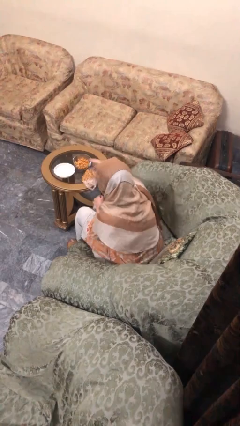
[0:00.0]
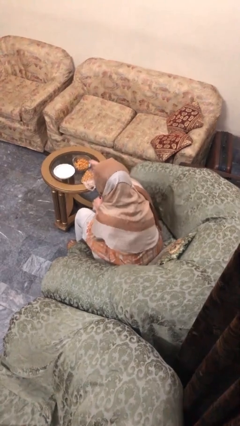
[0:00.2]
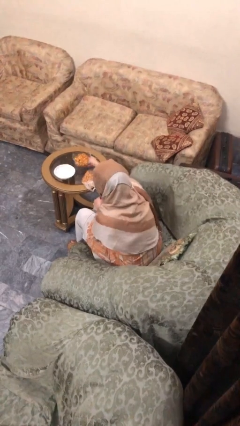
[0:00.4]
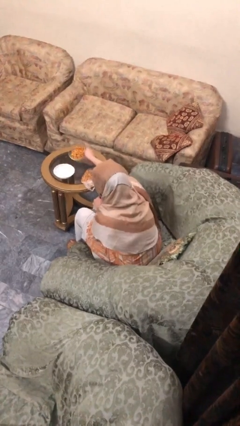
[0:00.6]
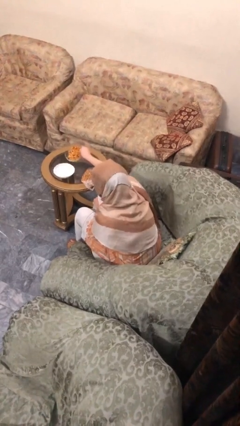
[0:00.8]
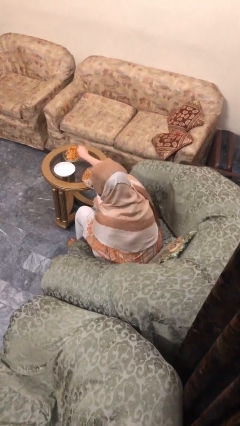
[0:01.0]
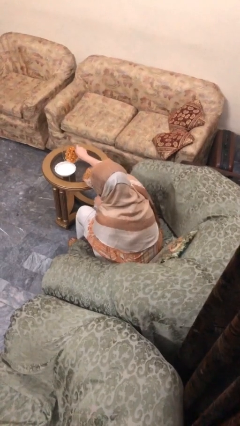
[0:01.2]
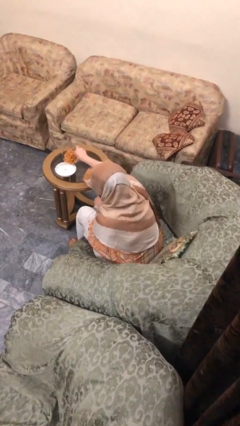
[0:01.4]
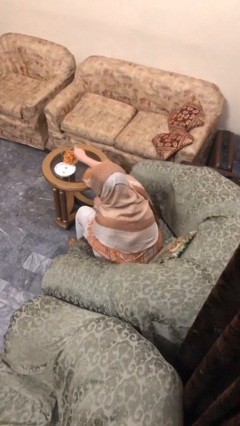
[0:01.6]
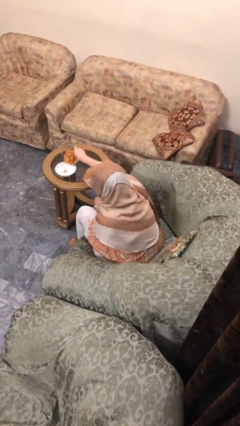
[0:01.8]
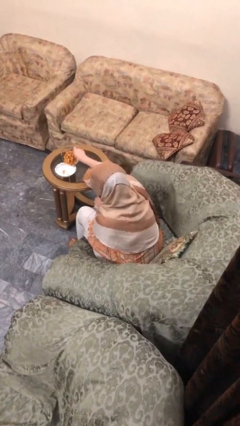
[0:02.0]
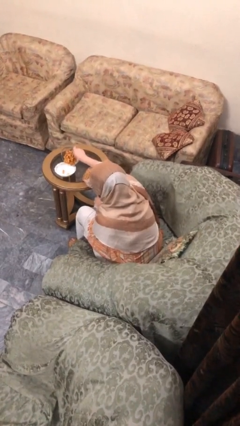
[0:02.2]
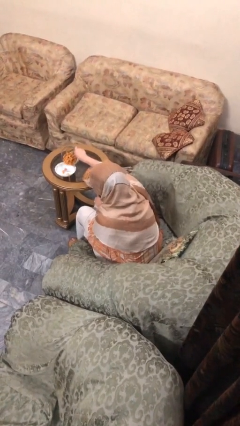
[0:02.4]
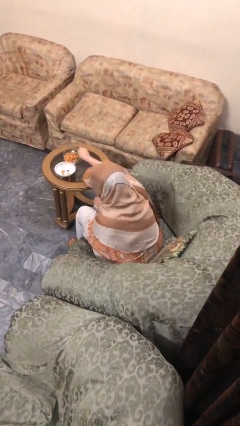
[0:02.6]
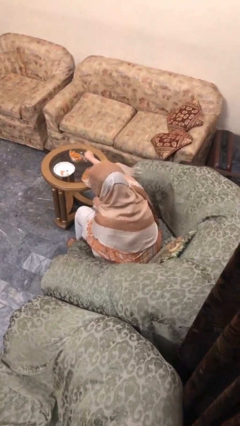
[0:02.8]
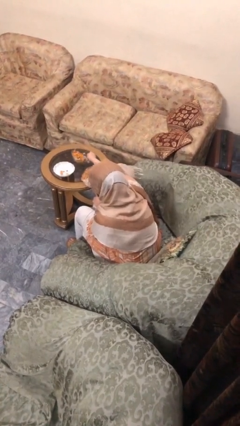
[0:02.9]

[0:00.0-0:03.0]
person pours into bowl

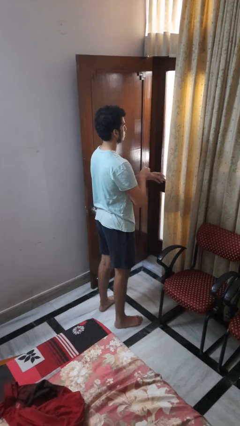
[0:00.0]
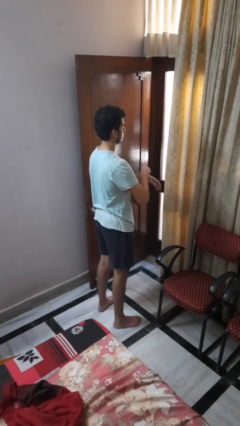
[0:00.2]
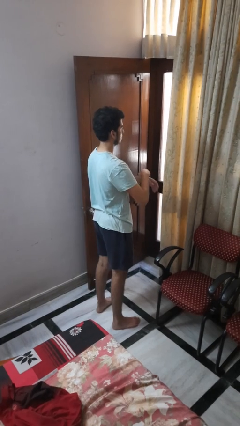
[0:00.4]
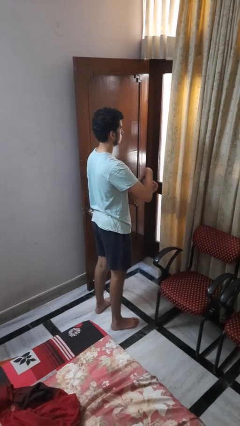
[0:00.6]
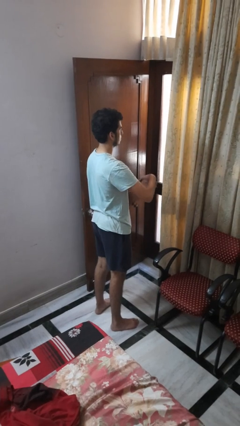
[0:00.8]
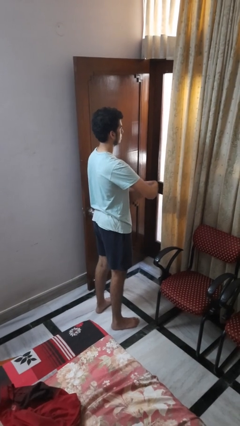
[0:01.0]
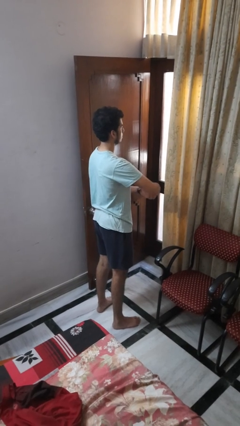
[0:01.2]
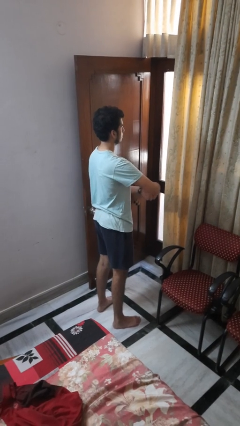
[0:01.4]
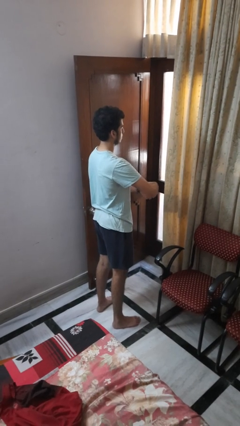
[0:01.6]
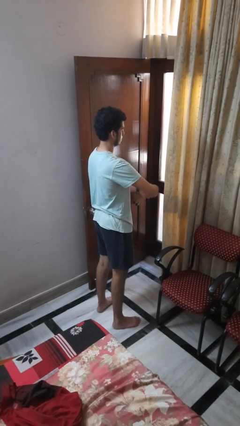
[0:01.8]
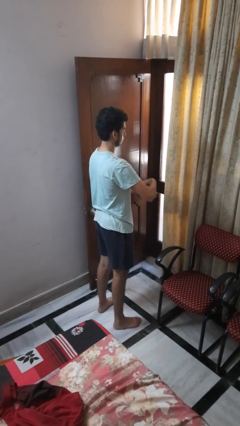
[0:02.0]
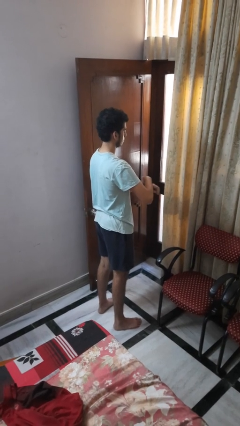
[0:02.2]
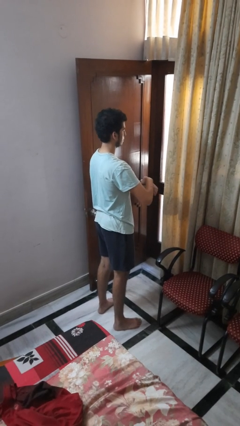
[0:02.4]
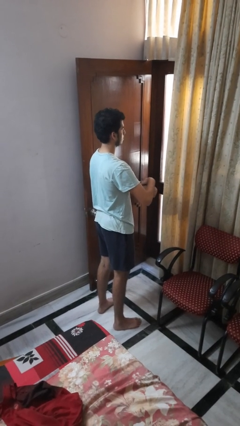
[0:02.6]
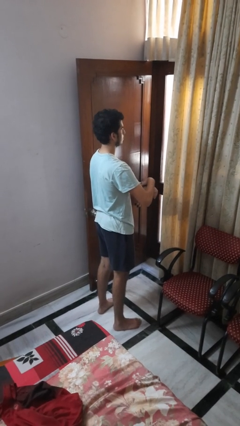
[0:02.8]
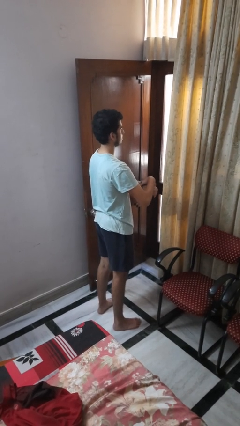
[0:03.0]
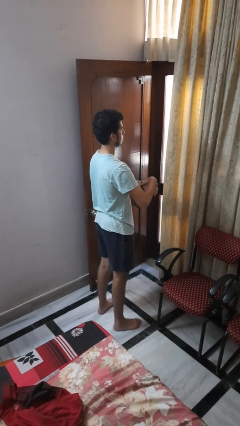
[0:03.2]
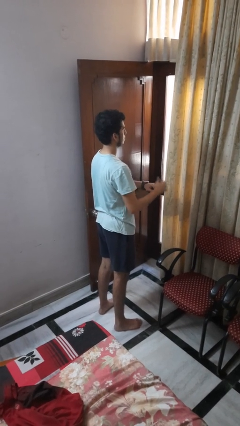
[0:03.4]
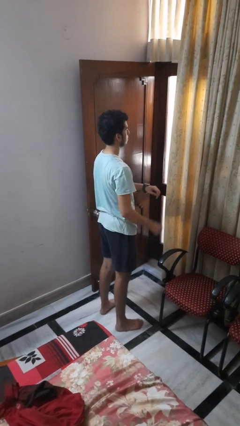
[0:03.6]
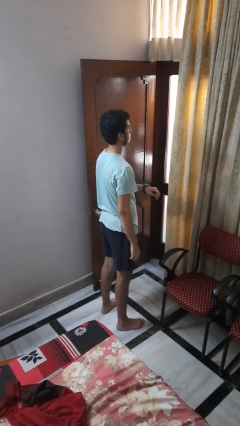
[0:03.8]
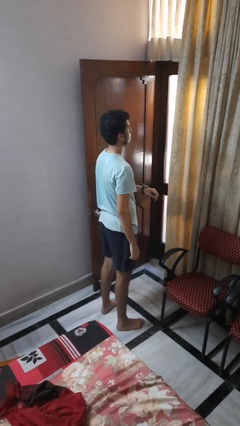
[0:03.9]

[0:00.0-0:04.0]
person puts on wristwatch

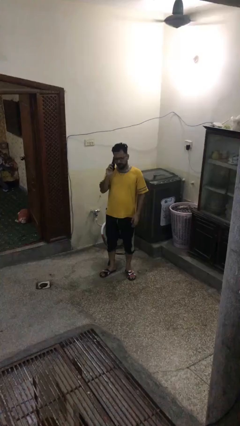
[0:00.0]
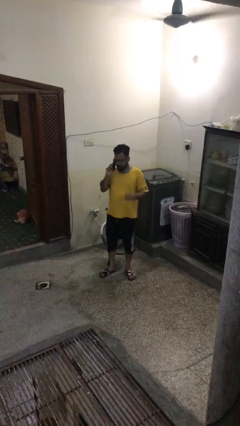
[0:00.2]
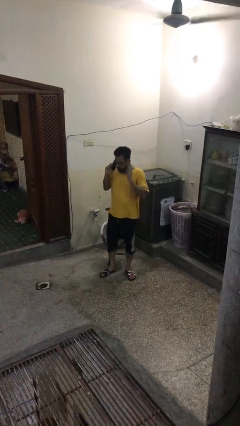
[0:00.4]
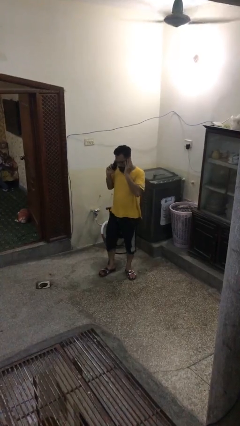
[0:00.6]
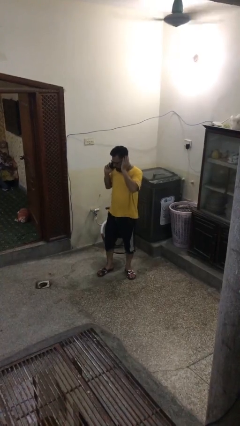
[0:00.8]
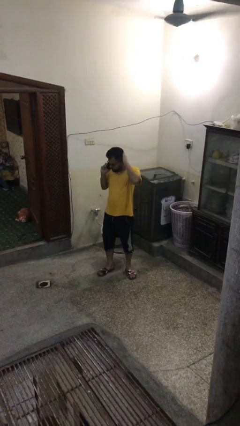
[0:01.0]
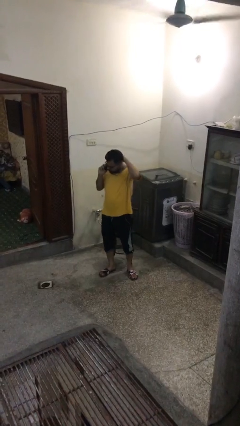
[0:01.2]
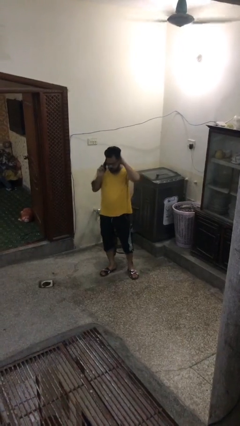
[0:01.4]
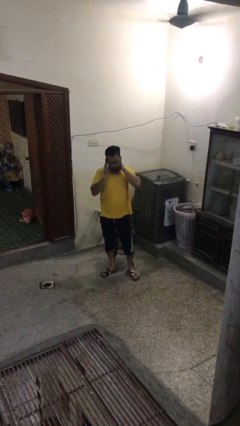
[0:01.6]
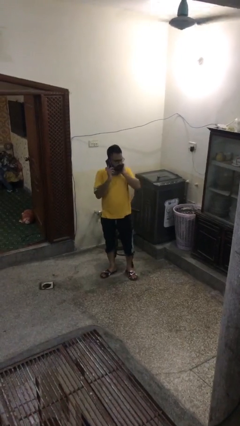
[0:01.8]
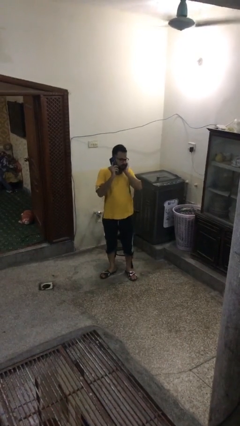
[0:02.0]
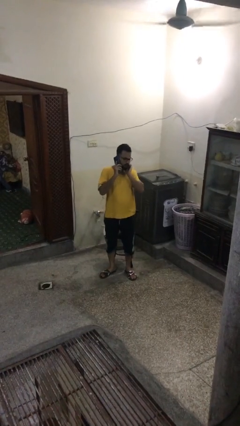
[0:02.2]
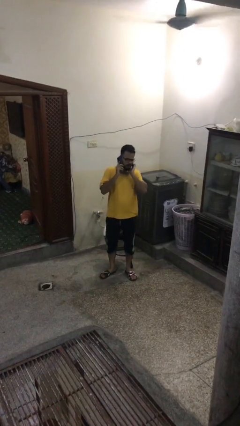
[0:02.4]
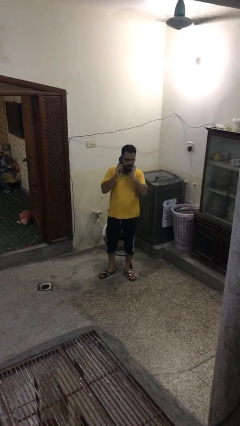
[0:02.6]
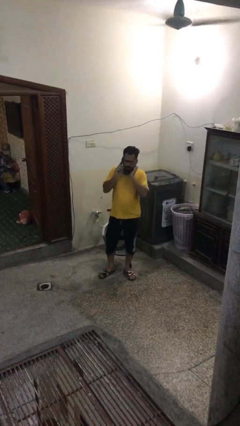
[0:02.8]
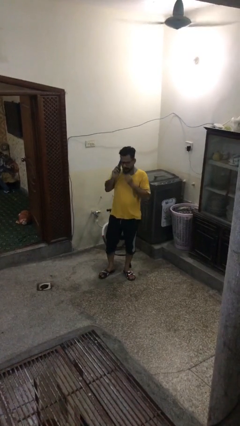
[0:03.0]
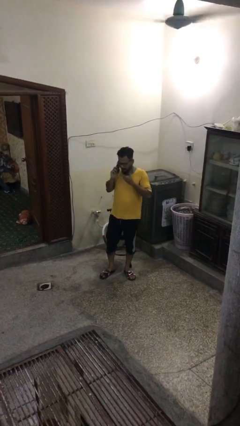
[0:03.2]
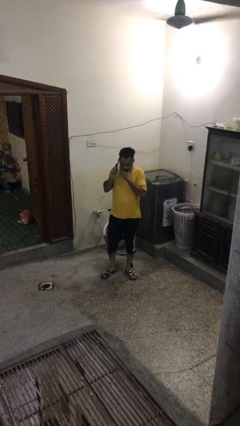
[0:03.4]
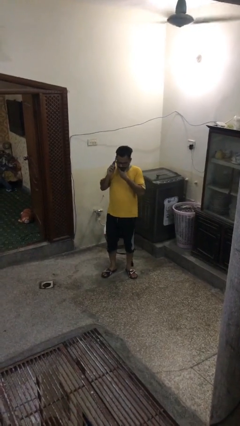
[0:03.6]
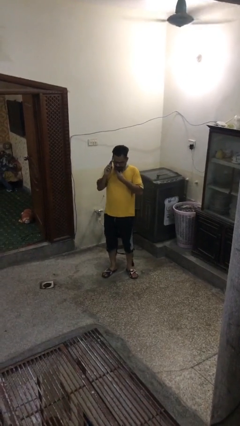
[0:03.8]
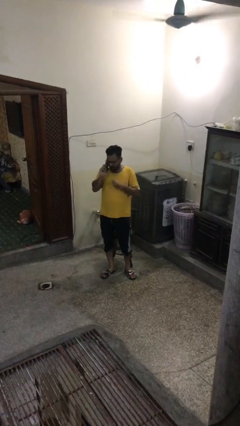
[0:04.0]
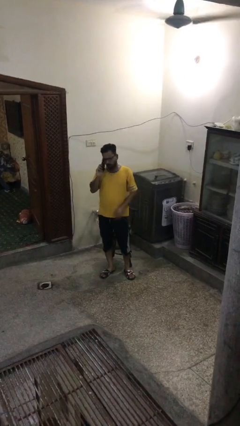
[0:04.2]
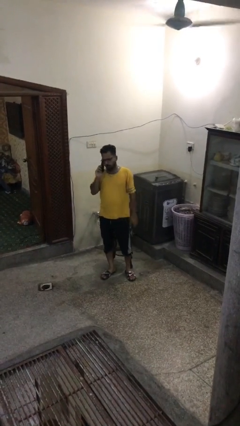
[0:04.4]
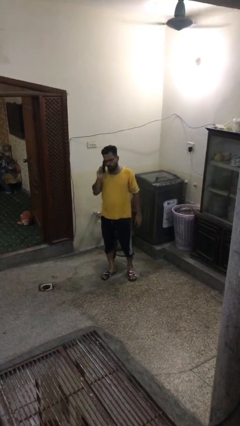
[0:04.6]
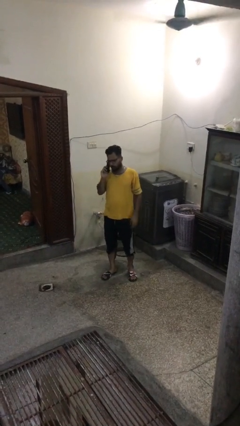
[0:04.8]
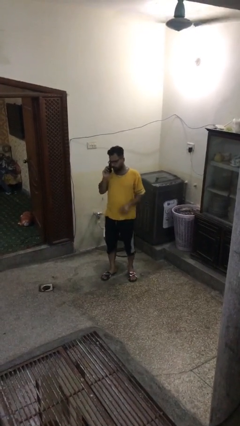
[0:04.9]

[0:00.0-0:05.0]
person talks on phone

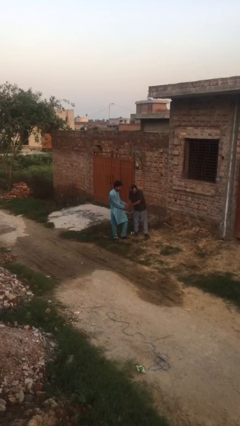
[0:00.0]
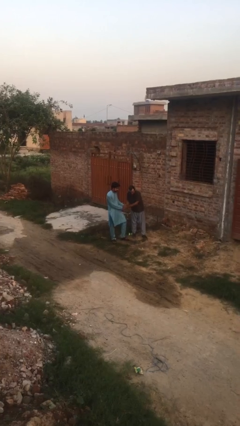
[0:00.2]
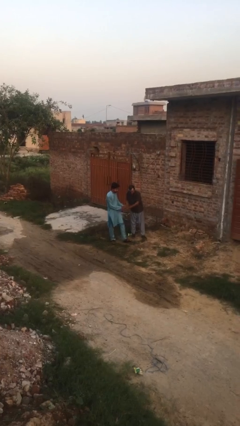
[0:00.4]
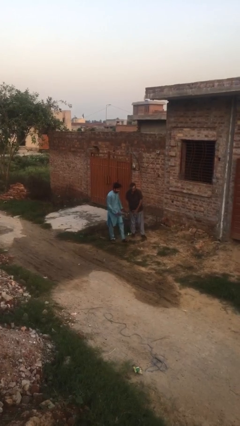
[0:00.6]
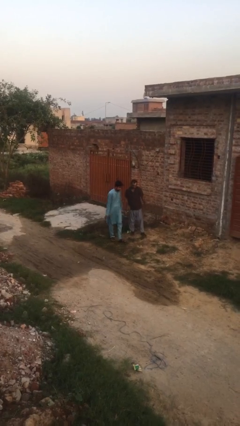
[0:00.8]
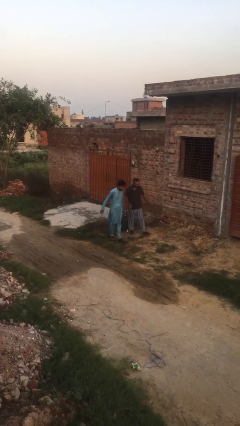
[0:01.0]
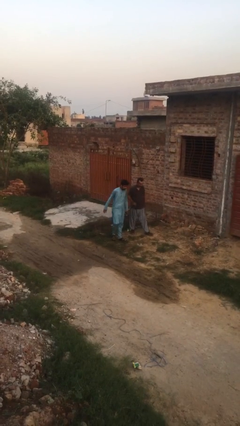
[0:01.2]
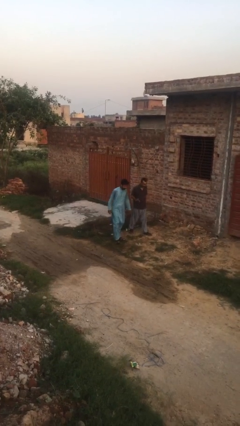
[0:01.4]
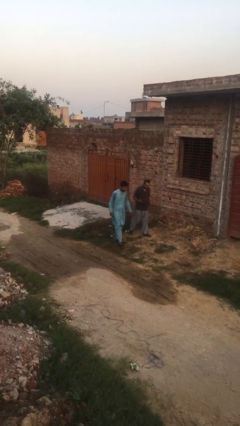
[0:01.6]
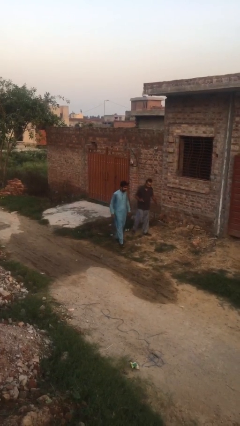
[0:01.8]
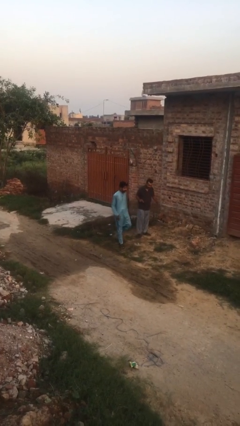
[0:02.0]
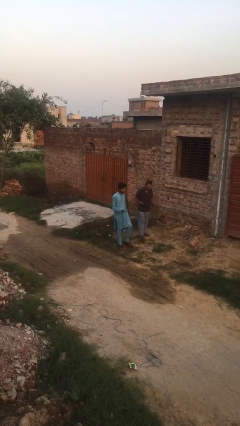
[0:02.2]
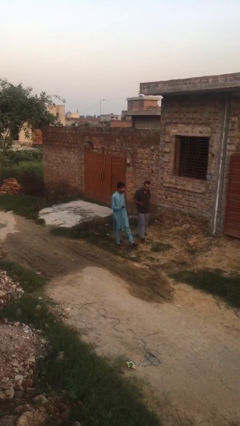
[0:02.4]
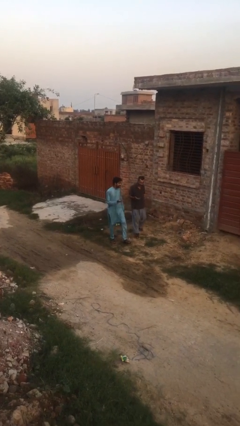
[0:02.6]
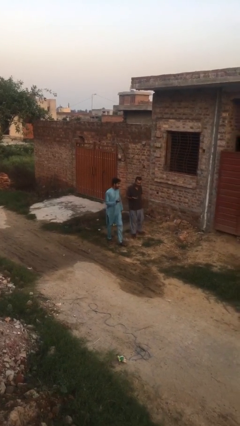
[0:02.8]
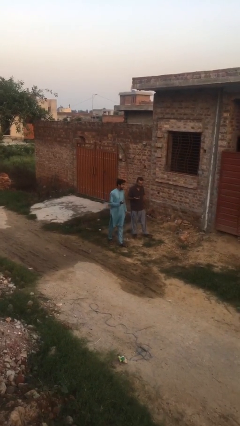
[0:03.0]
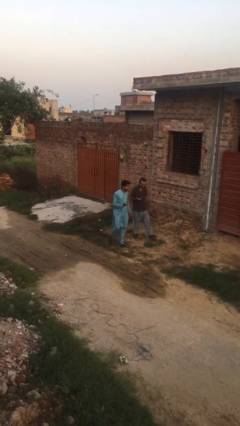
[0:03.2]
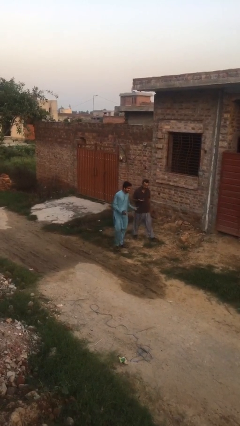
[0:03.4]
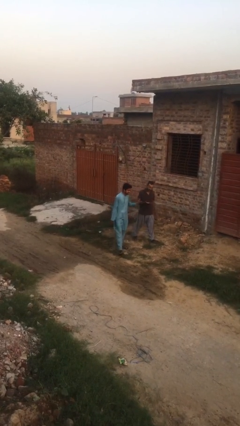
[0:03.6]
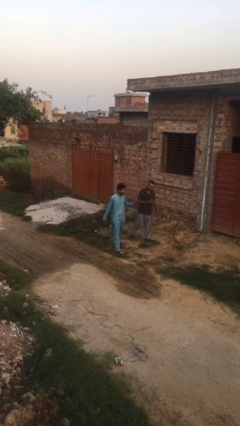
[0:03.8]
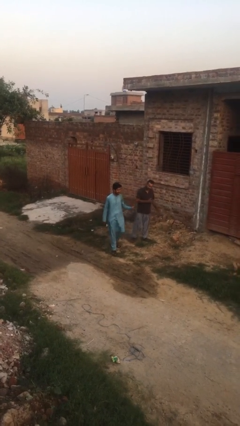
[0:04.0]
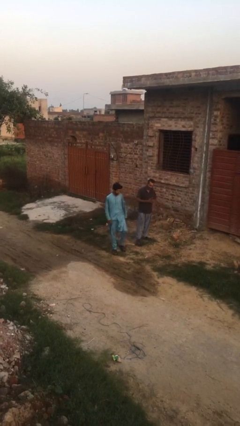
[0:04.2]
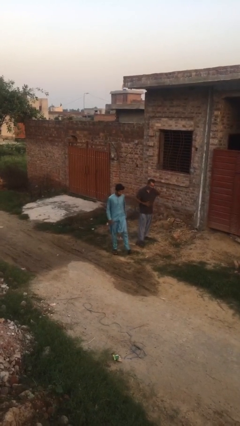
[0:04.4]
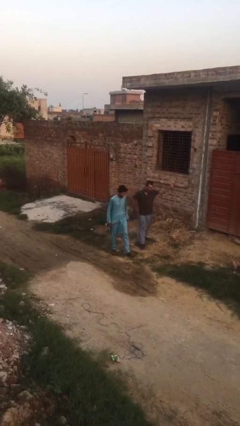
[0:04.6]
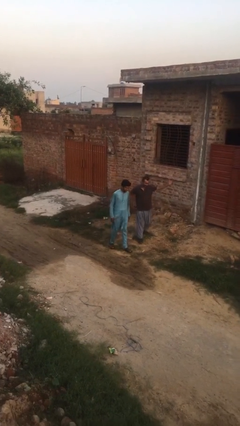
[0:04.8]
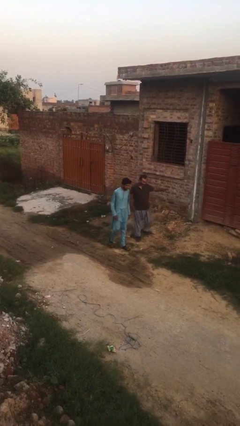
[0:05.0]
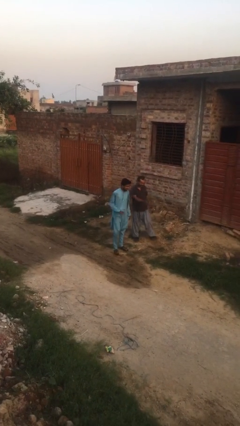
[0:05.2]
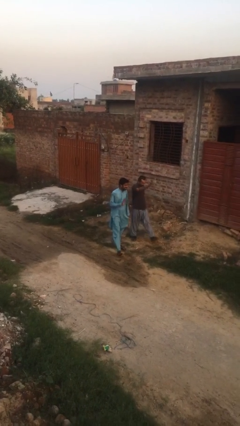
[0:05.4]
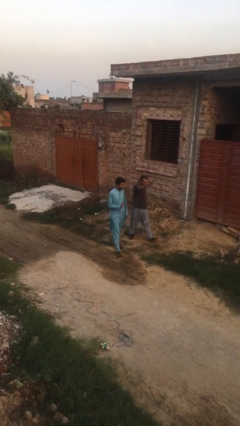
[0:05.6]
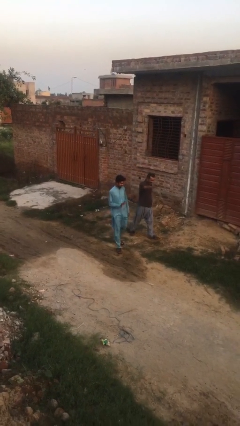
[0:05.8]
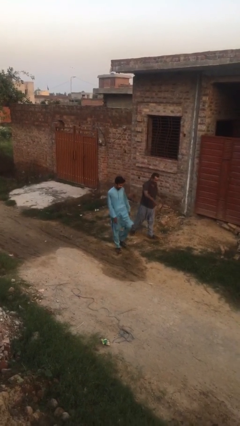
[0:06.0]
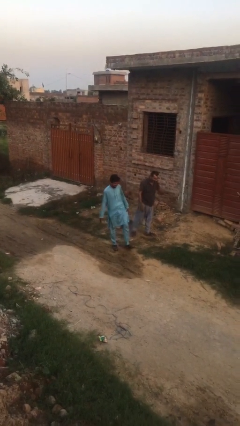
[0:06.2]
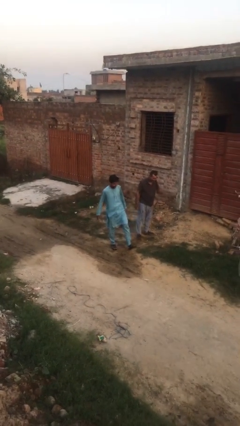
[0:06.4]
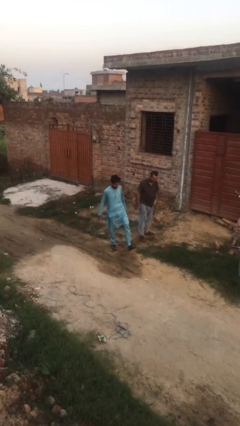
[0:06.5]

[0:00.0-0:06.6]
person talks to person
